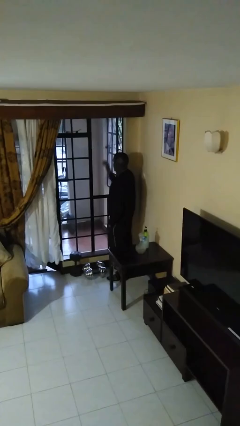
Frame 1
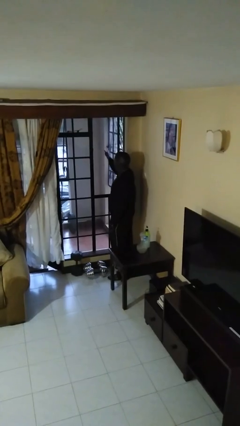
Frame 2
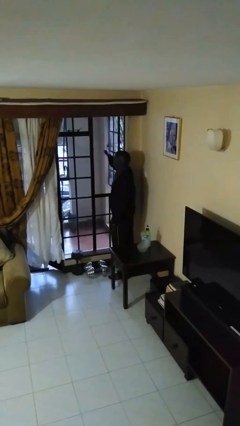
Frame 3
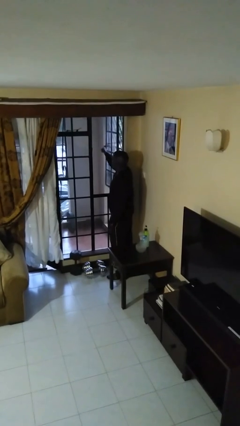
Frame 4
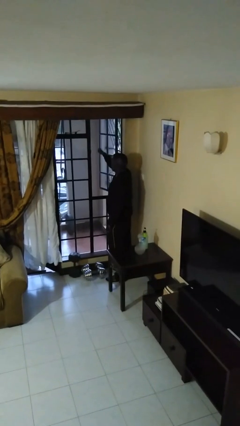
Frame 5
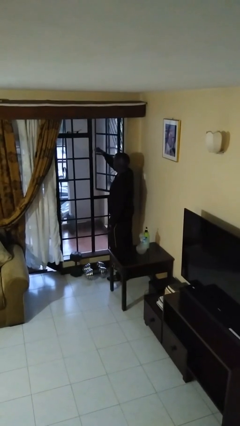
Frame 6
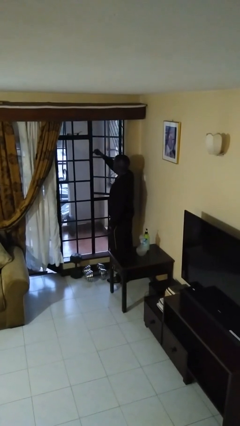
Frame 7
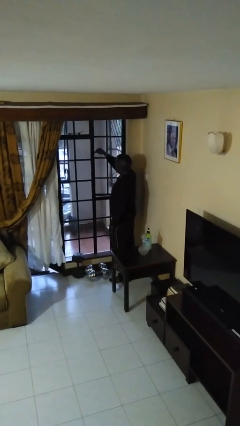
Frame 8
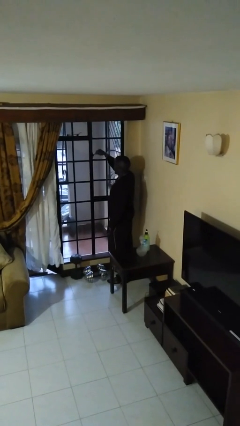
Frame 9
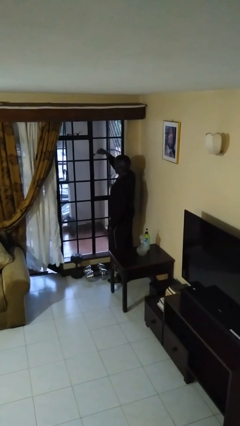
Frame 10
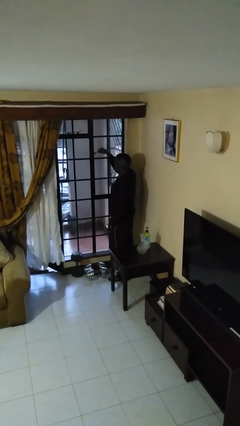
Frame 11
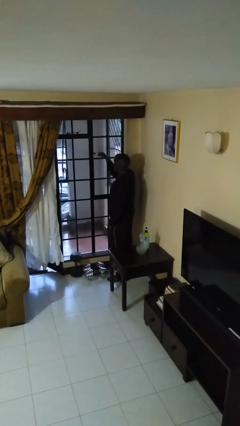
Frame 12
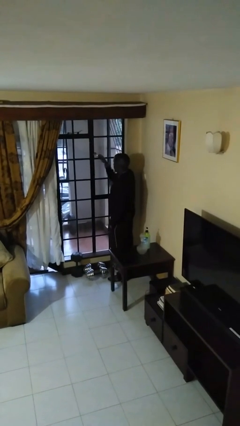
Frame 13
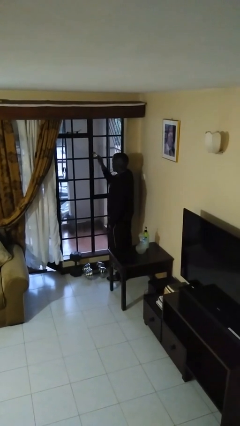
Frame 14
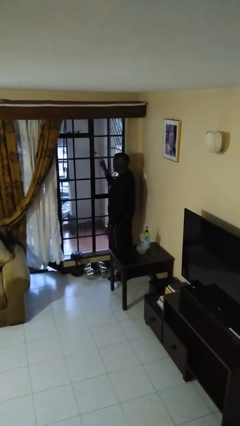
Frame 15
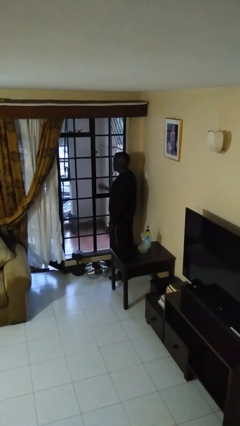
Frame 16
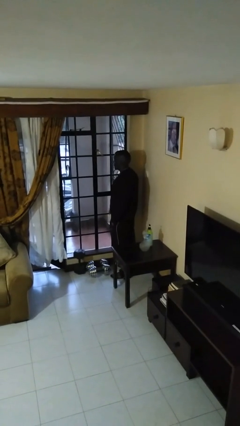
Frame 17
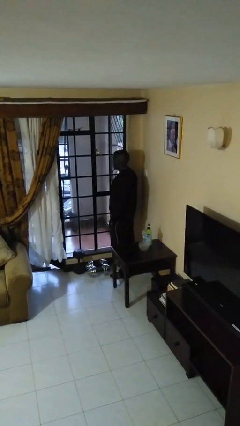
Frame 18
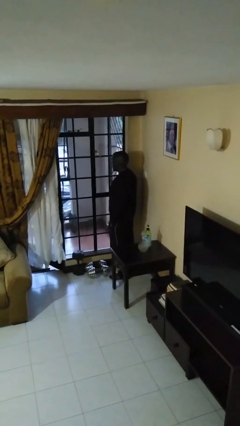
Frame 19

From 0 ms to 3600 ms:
person closes home window

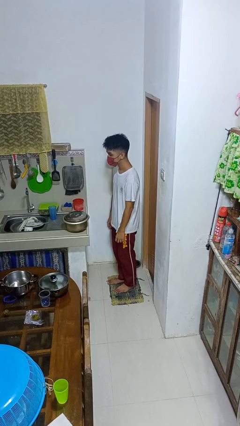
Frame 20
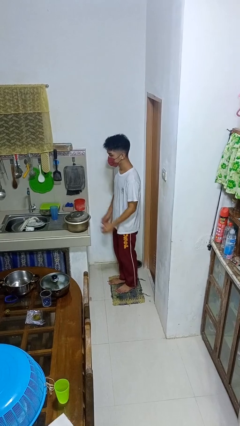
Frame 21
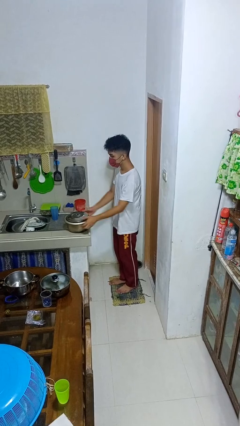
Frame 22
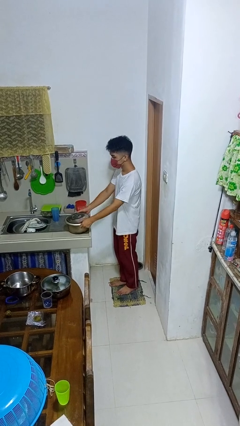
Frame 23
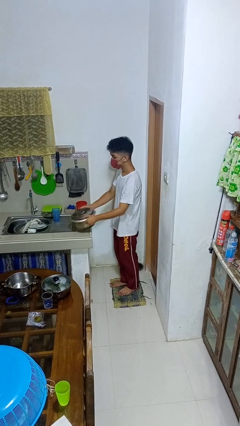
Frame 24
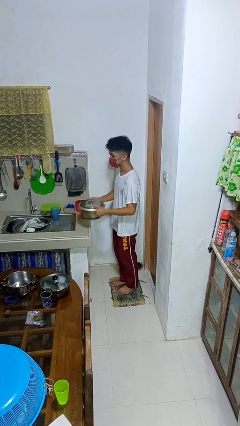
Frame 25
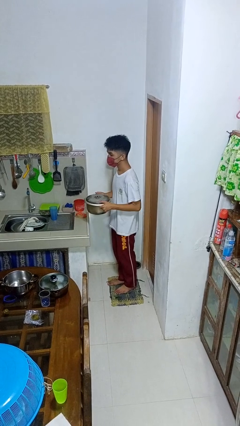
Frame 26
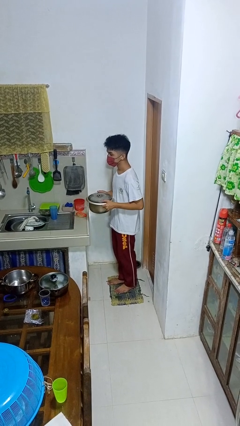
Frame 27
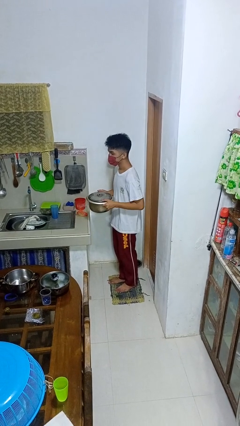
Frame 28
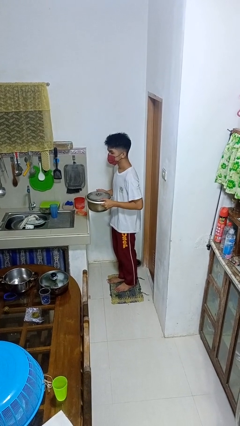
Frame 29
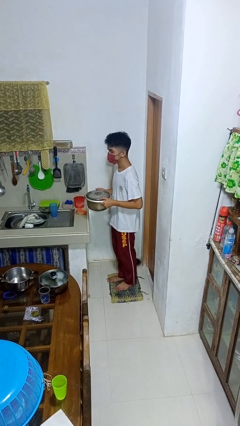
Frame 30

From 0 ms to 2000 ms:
person picks up object from countertop

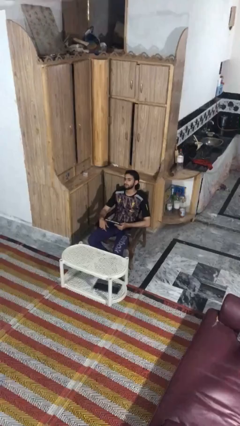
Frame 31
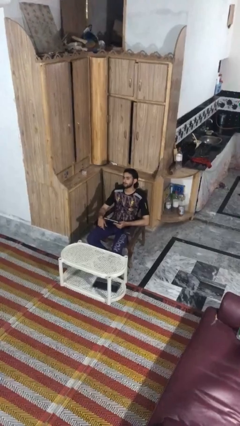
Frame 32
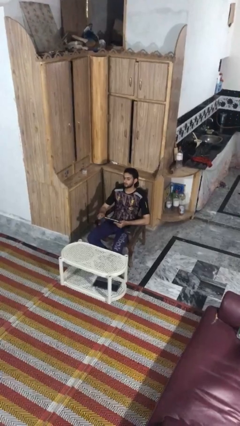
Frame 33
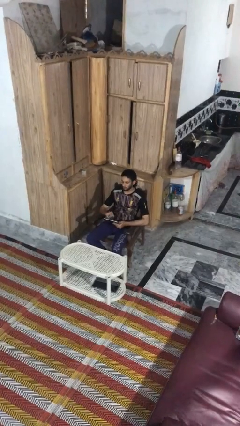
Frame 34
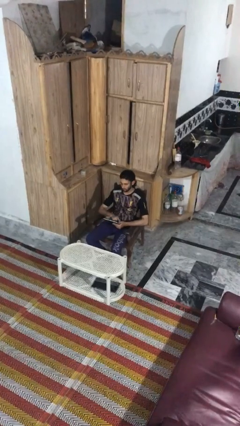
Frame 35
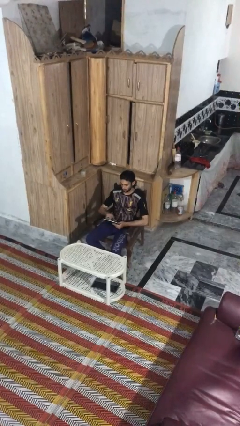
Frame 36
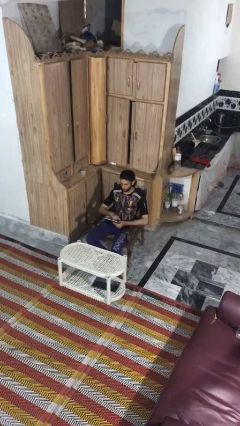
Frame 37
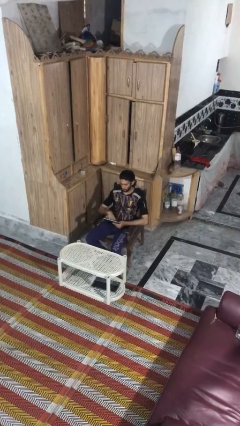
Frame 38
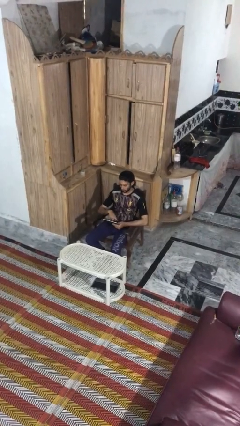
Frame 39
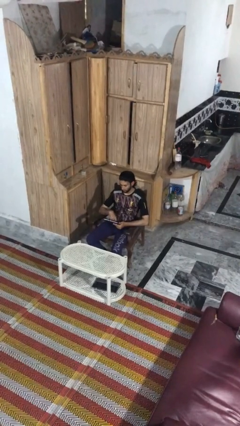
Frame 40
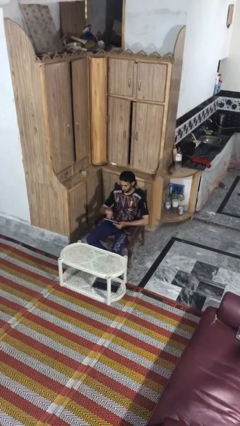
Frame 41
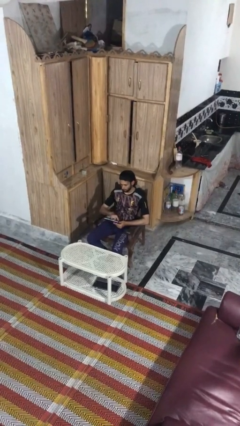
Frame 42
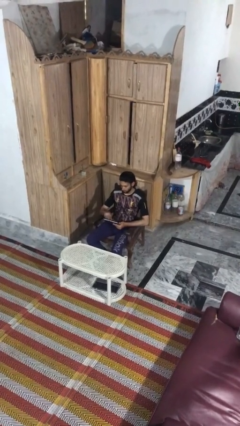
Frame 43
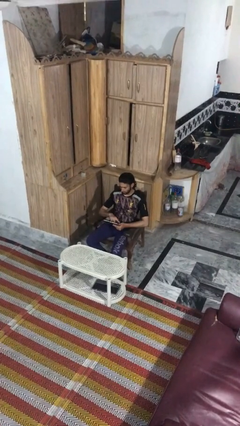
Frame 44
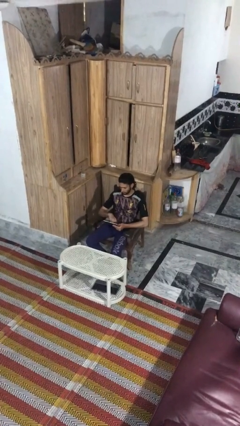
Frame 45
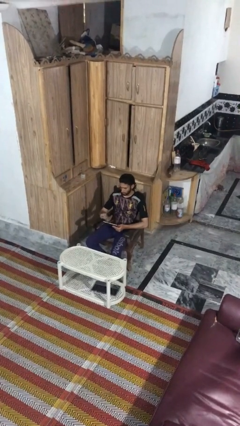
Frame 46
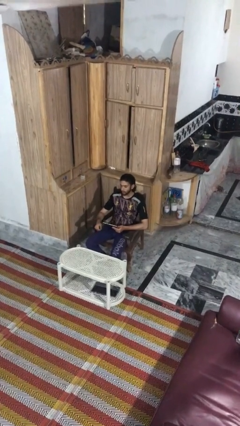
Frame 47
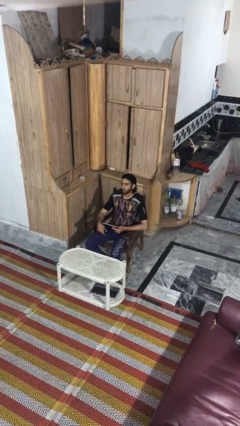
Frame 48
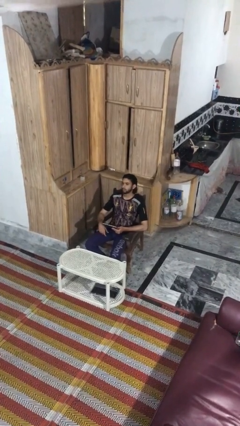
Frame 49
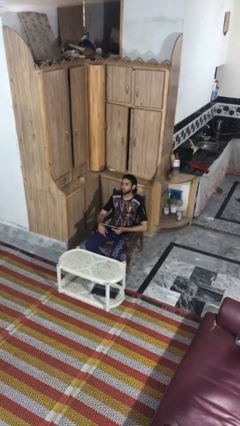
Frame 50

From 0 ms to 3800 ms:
person interacts with tablet

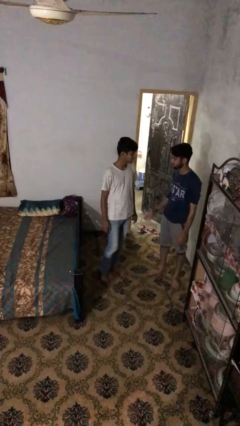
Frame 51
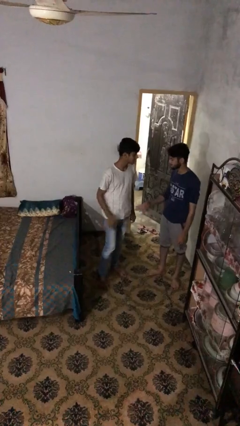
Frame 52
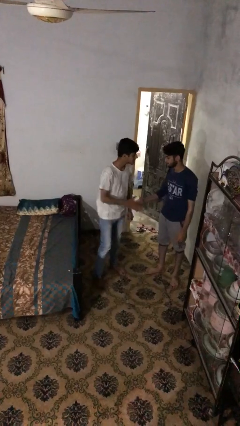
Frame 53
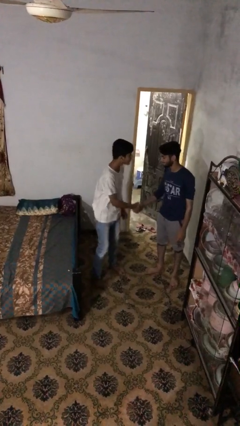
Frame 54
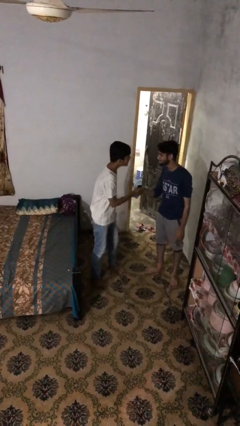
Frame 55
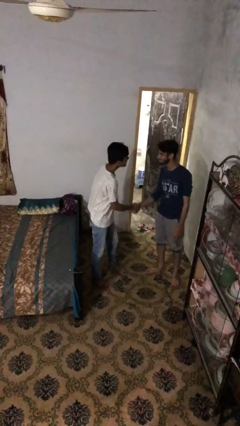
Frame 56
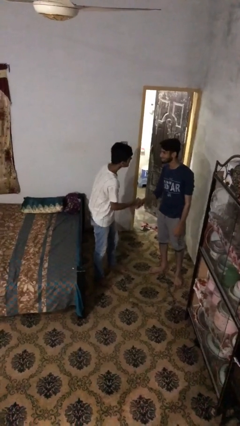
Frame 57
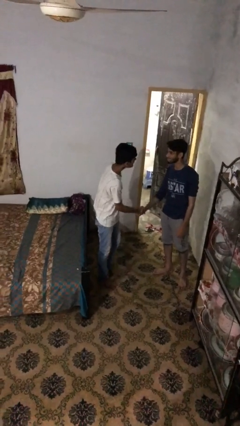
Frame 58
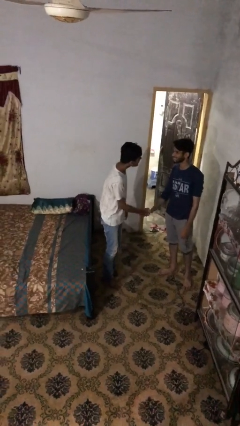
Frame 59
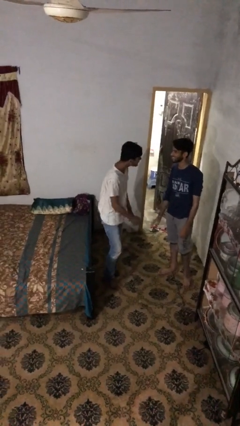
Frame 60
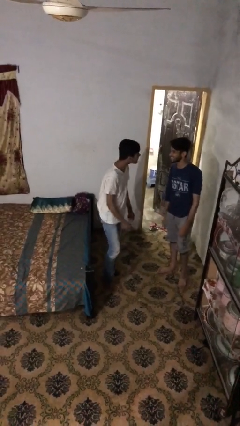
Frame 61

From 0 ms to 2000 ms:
person shakes hand

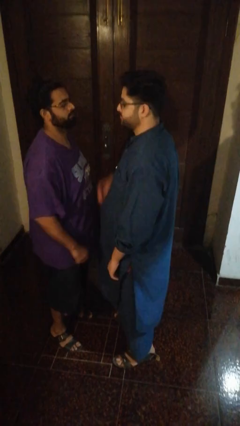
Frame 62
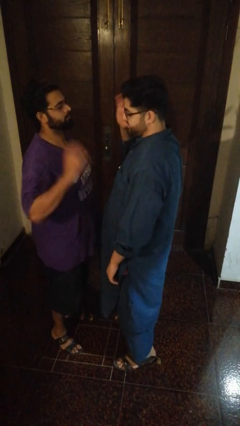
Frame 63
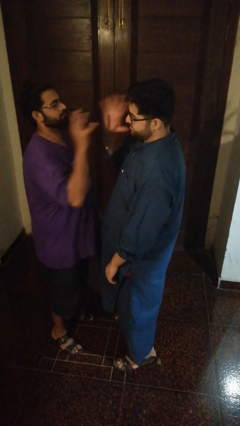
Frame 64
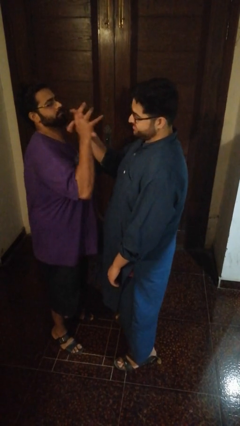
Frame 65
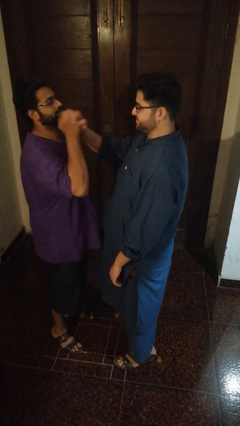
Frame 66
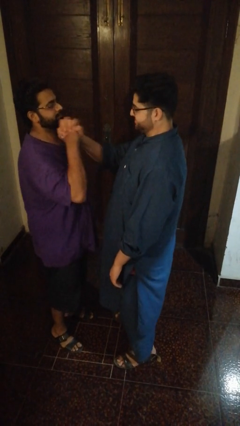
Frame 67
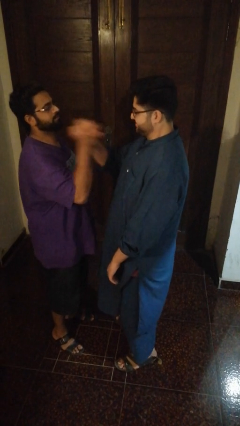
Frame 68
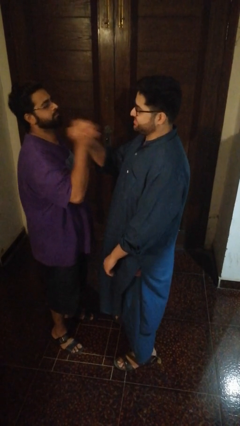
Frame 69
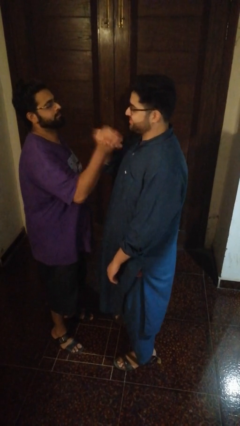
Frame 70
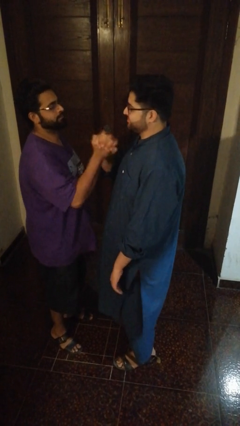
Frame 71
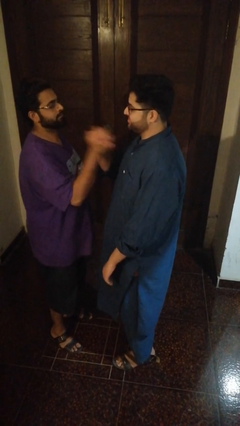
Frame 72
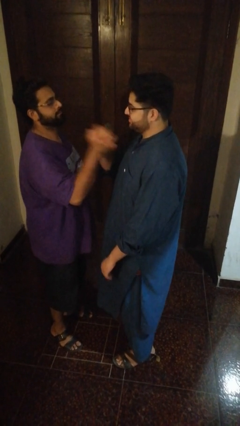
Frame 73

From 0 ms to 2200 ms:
person highfives hand

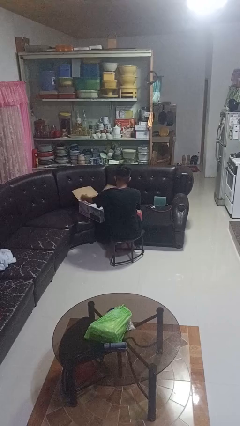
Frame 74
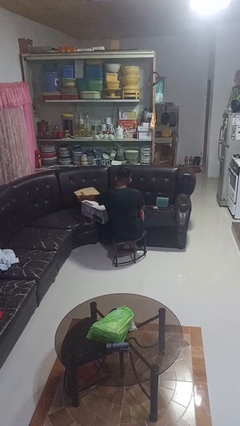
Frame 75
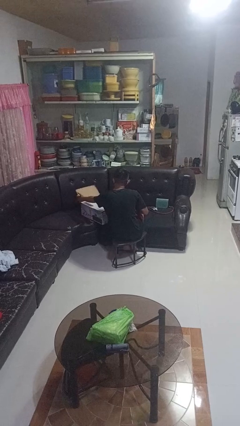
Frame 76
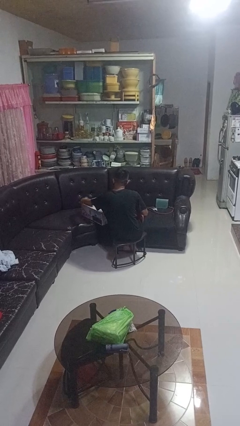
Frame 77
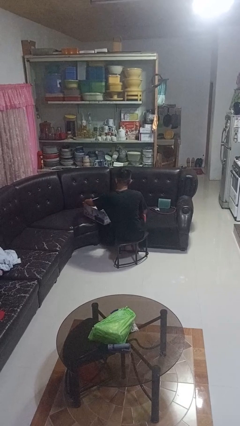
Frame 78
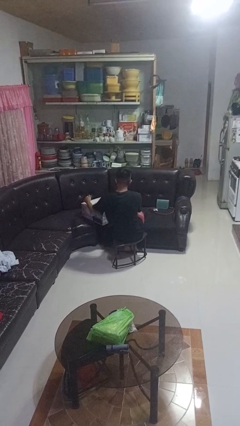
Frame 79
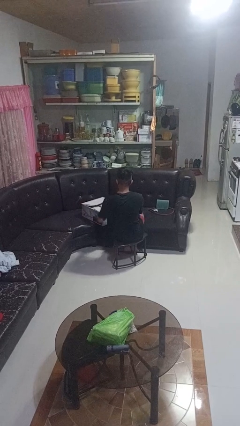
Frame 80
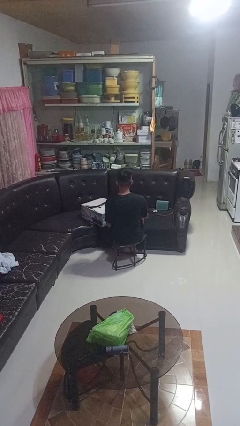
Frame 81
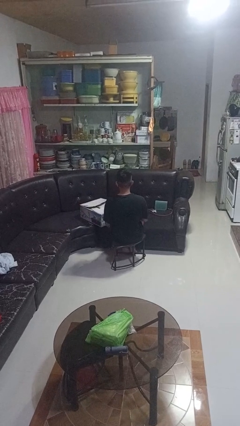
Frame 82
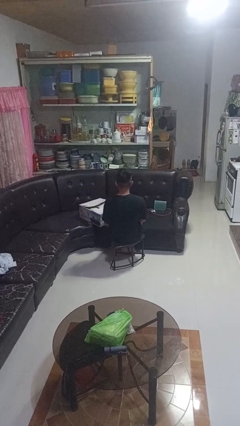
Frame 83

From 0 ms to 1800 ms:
person closes box

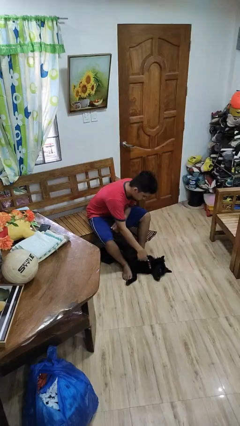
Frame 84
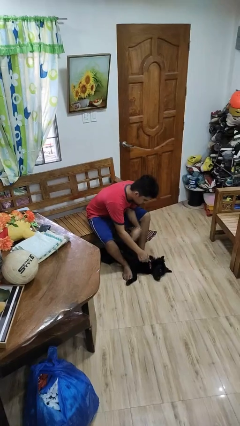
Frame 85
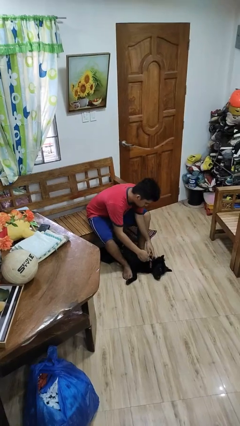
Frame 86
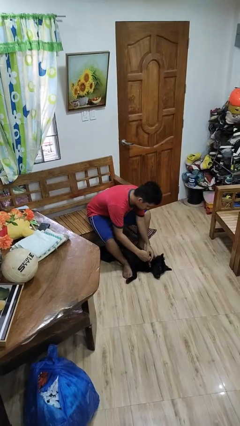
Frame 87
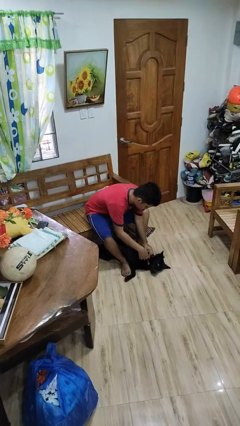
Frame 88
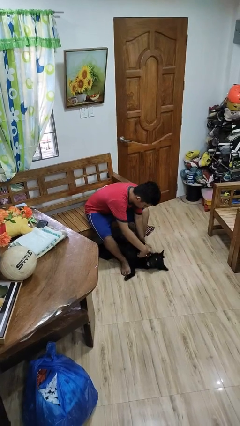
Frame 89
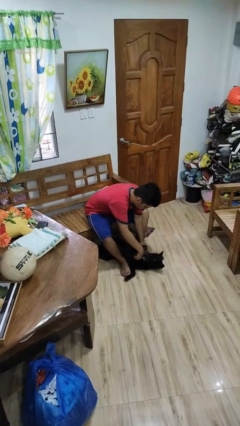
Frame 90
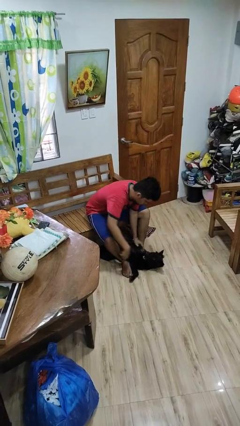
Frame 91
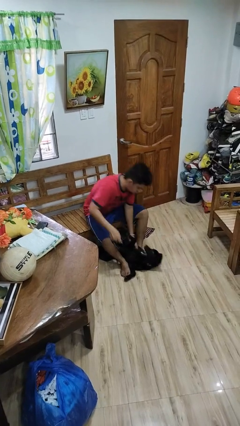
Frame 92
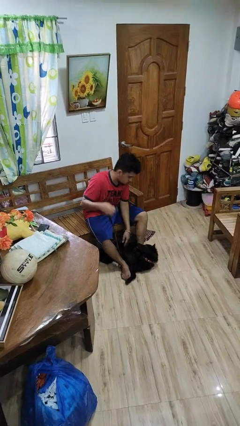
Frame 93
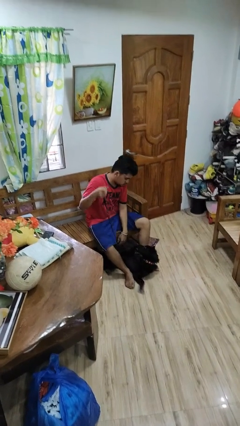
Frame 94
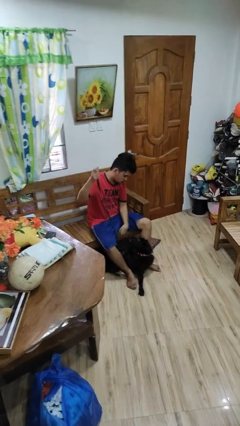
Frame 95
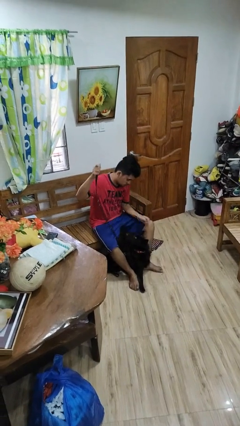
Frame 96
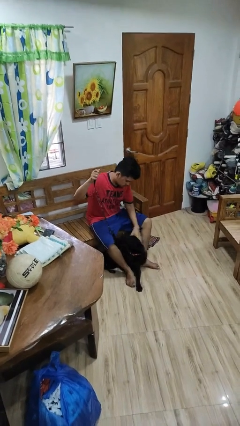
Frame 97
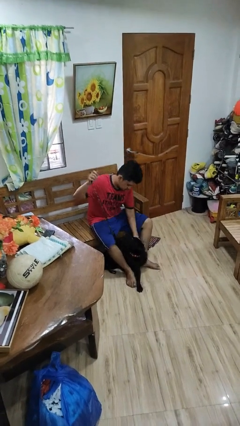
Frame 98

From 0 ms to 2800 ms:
person unattaches leash from dog
